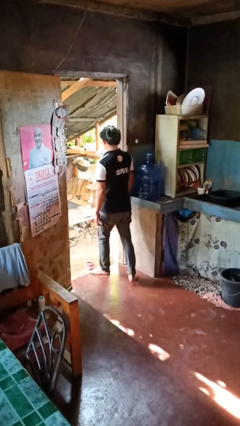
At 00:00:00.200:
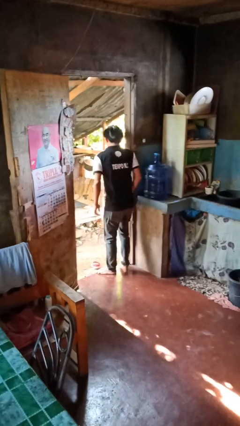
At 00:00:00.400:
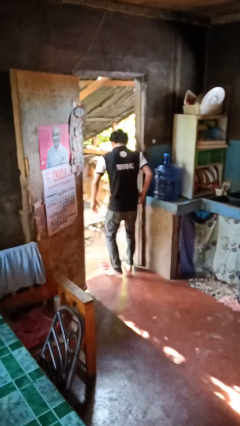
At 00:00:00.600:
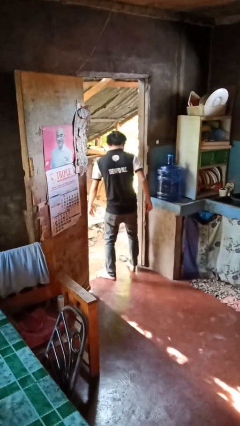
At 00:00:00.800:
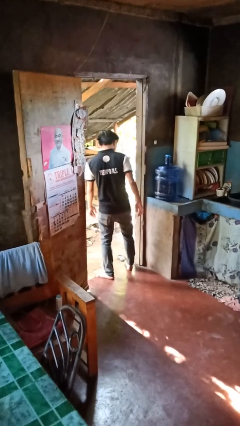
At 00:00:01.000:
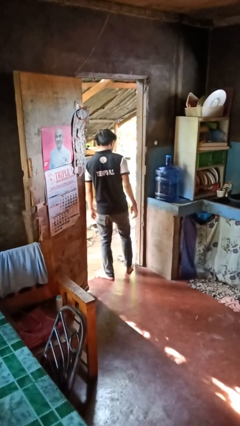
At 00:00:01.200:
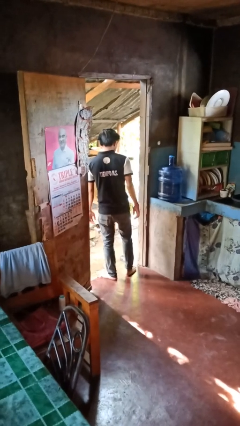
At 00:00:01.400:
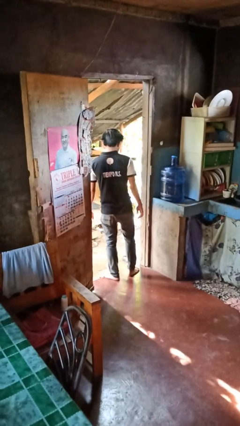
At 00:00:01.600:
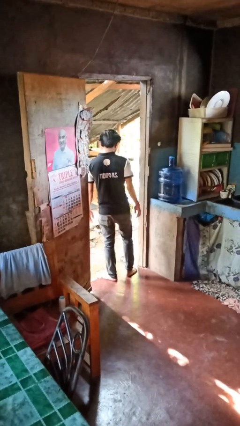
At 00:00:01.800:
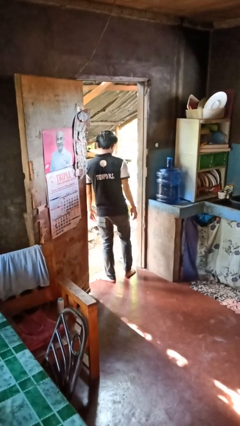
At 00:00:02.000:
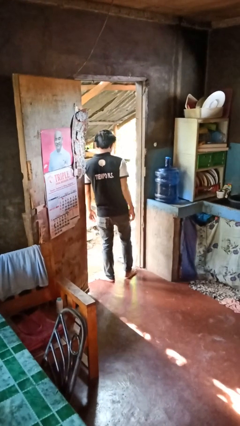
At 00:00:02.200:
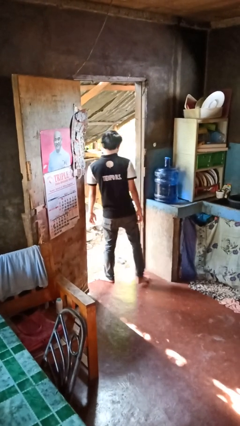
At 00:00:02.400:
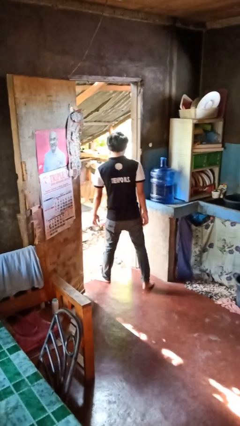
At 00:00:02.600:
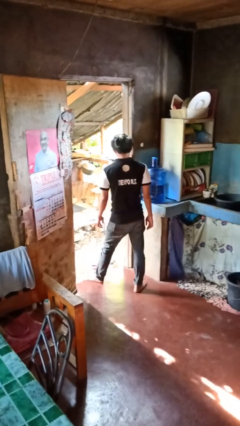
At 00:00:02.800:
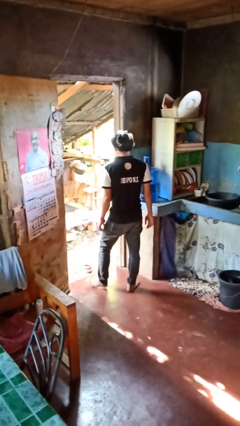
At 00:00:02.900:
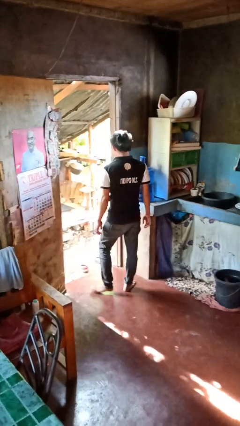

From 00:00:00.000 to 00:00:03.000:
person bumps into wall

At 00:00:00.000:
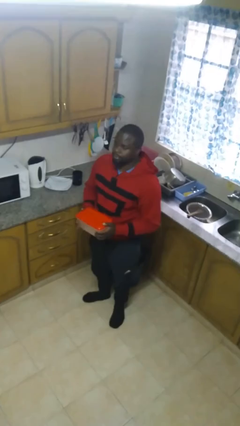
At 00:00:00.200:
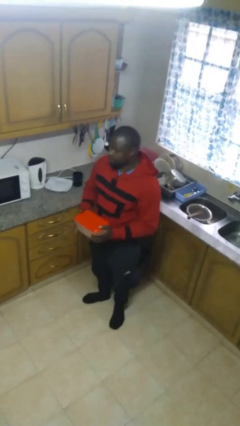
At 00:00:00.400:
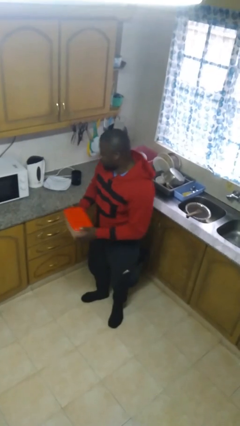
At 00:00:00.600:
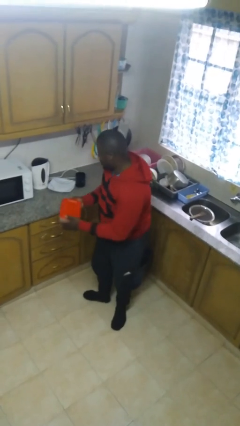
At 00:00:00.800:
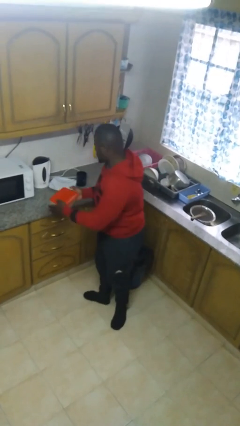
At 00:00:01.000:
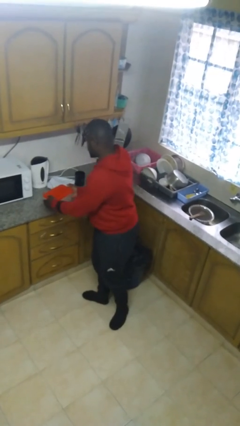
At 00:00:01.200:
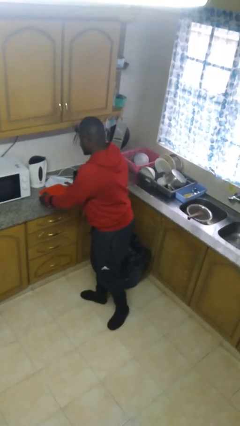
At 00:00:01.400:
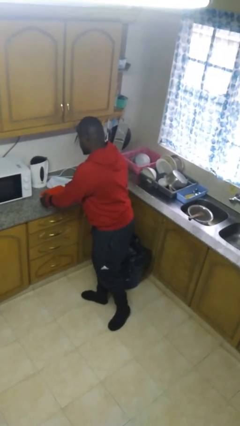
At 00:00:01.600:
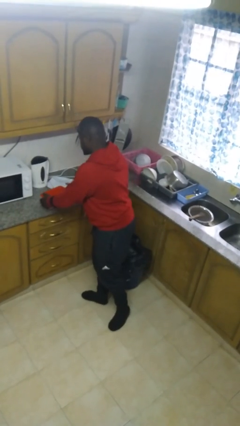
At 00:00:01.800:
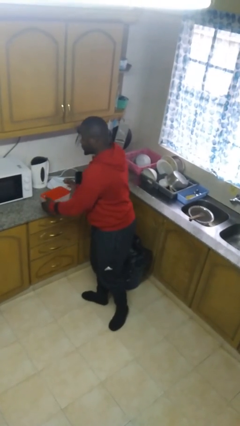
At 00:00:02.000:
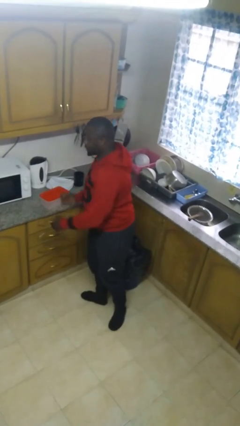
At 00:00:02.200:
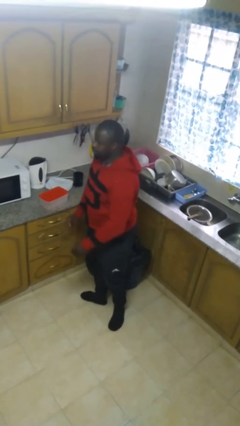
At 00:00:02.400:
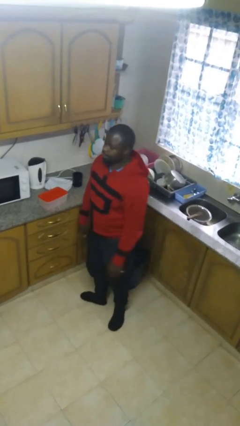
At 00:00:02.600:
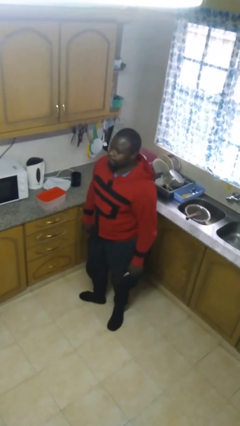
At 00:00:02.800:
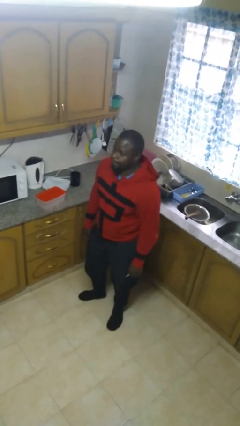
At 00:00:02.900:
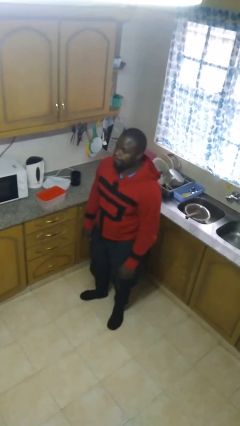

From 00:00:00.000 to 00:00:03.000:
person puts down object on countertop

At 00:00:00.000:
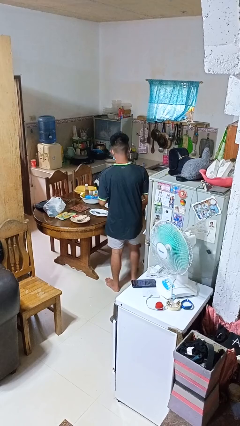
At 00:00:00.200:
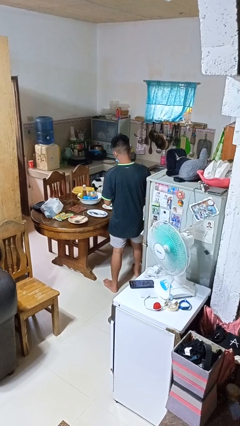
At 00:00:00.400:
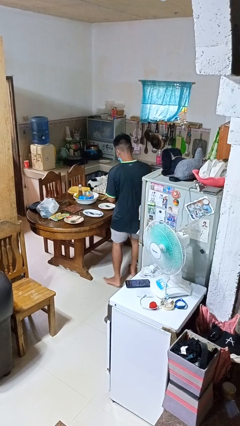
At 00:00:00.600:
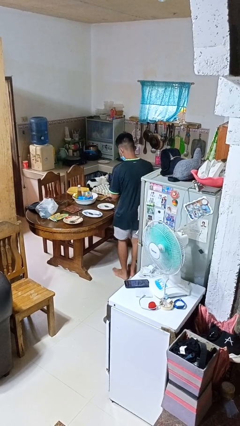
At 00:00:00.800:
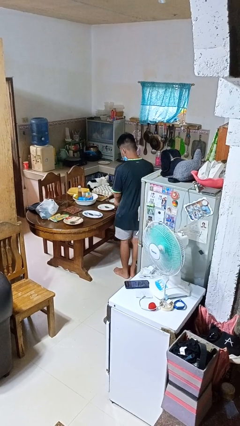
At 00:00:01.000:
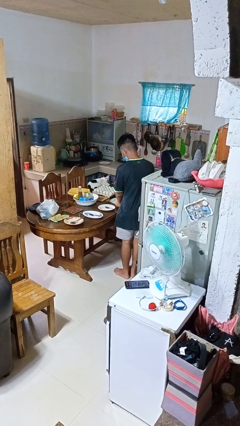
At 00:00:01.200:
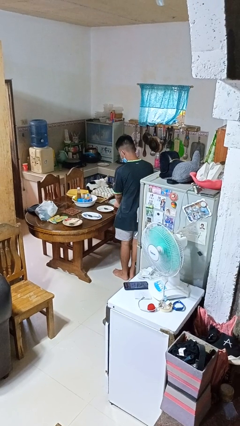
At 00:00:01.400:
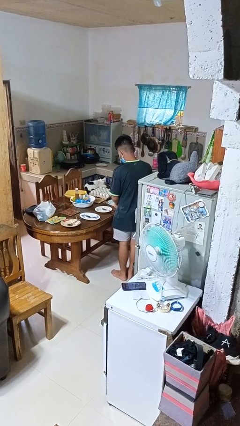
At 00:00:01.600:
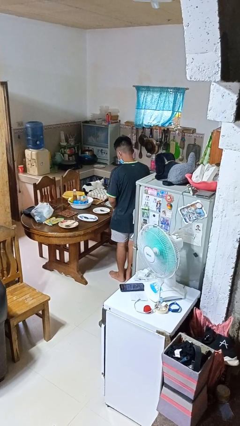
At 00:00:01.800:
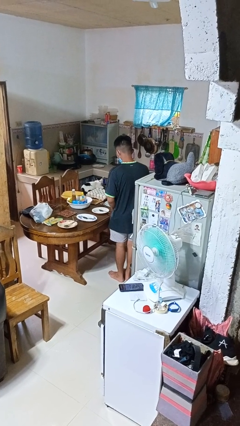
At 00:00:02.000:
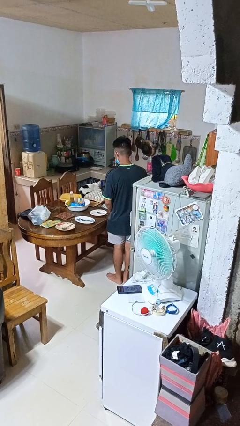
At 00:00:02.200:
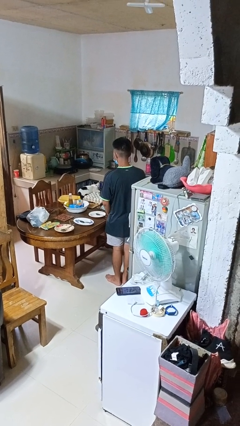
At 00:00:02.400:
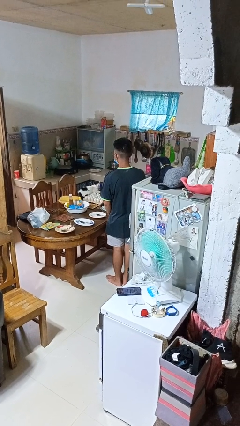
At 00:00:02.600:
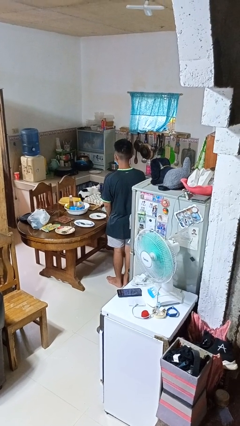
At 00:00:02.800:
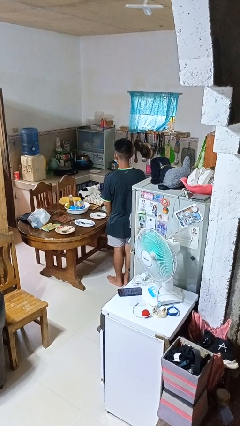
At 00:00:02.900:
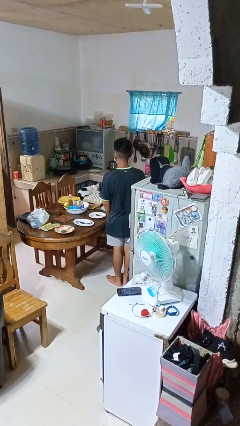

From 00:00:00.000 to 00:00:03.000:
person sets table

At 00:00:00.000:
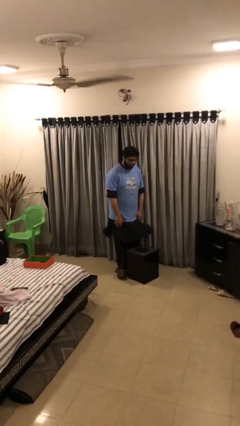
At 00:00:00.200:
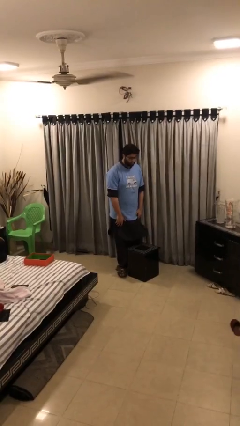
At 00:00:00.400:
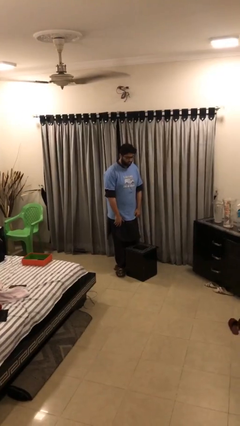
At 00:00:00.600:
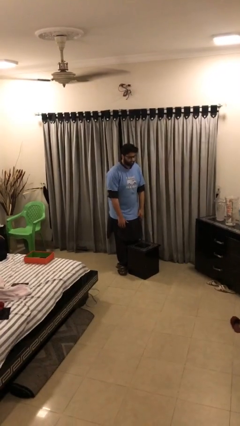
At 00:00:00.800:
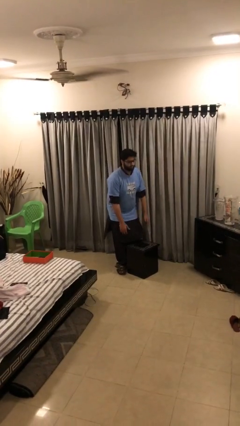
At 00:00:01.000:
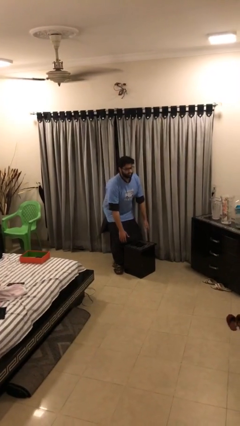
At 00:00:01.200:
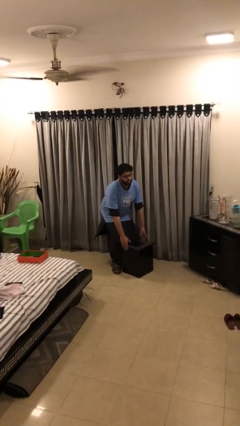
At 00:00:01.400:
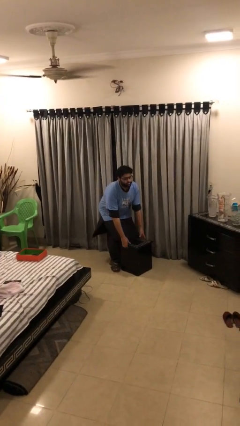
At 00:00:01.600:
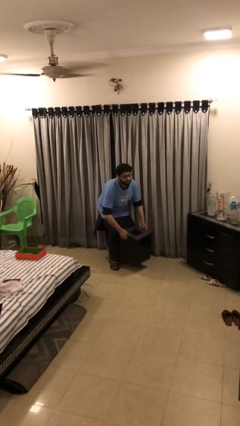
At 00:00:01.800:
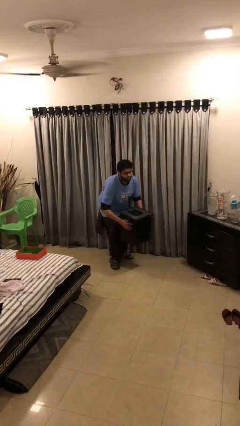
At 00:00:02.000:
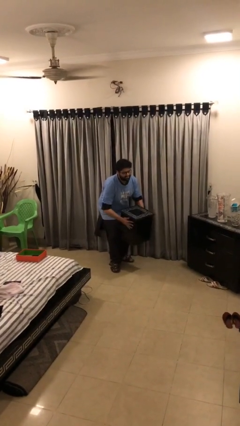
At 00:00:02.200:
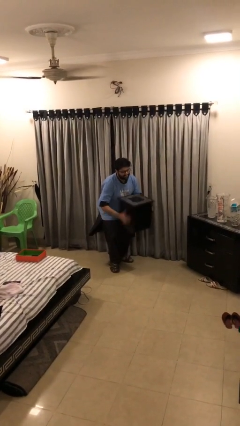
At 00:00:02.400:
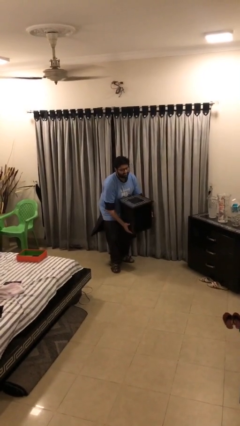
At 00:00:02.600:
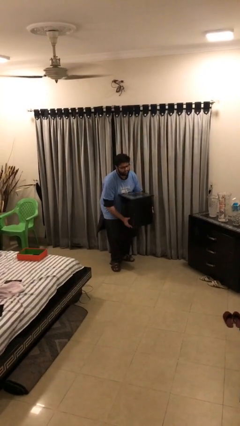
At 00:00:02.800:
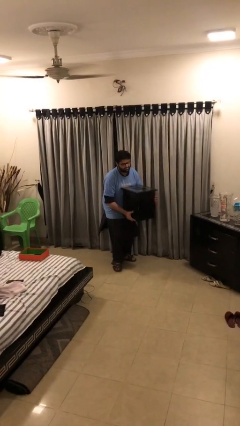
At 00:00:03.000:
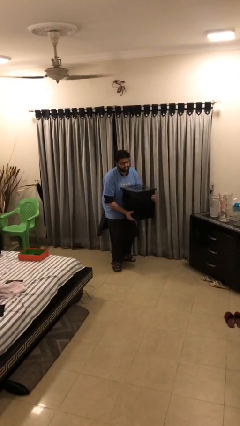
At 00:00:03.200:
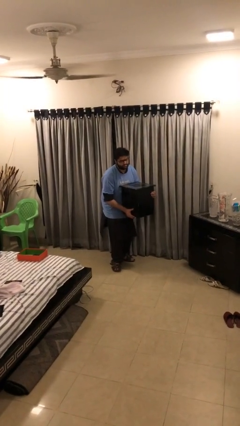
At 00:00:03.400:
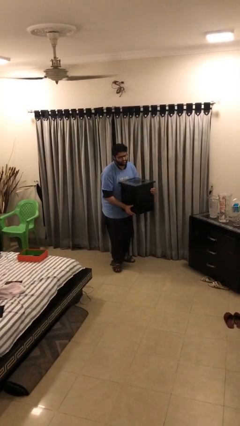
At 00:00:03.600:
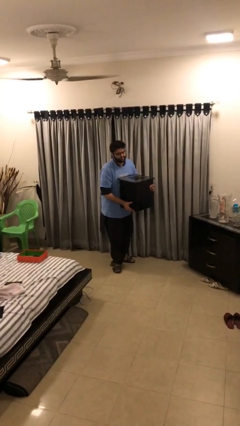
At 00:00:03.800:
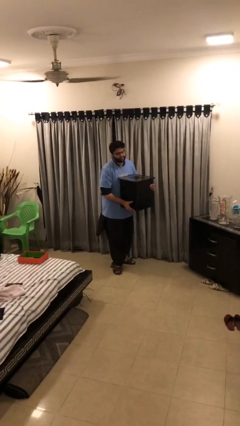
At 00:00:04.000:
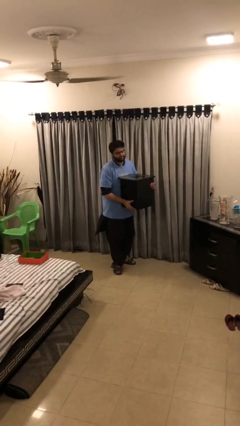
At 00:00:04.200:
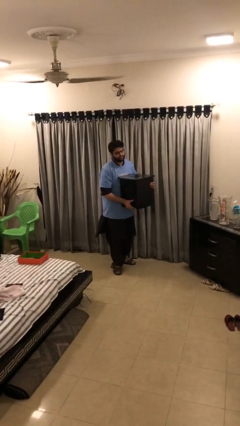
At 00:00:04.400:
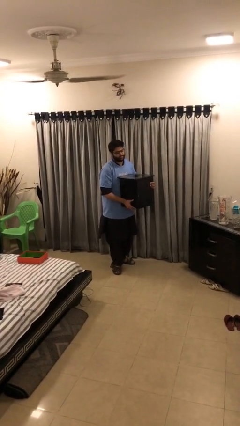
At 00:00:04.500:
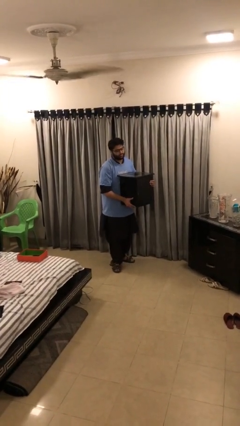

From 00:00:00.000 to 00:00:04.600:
person picks up object from floor

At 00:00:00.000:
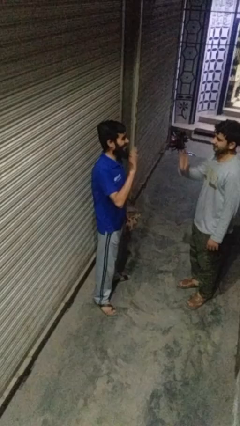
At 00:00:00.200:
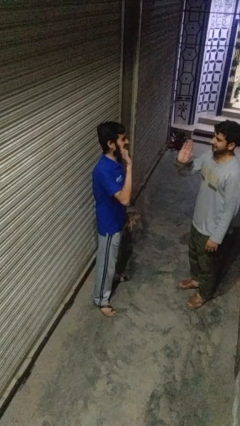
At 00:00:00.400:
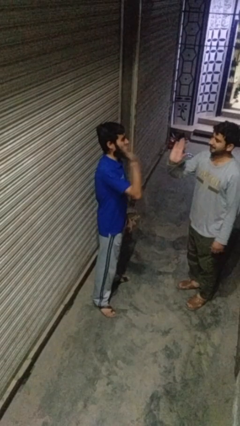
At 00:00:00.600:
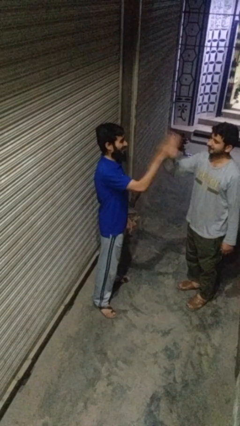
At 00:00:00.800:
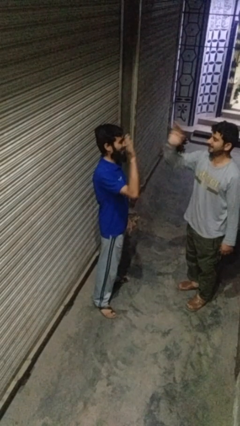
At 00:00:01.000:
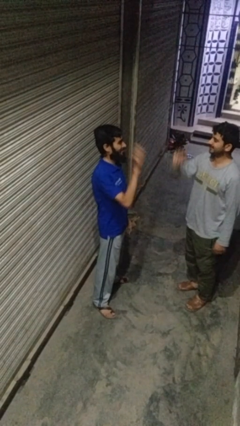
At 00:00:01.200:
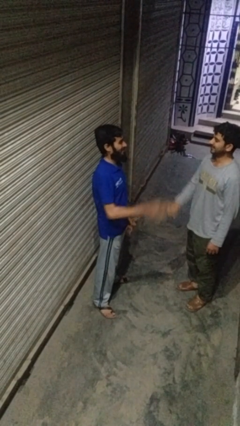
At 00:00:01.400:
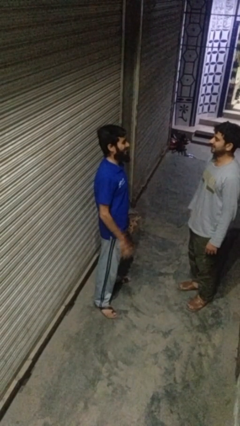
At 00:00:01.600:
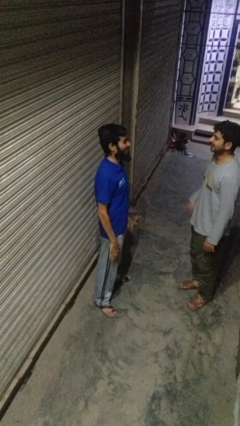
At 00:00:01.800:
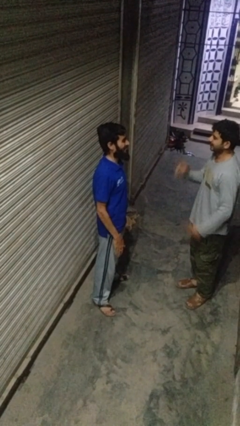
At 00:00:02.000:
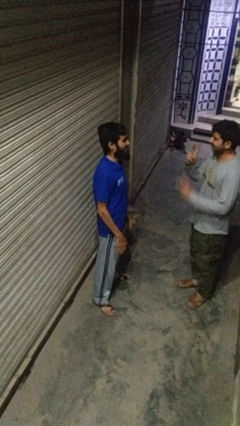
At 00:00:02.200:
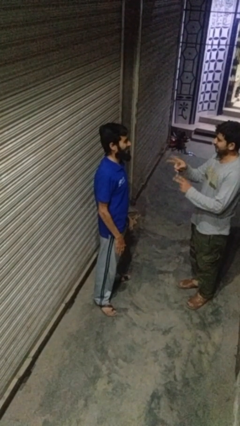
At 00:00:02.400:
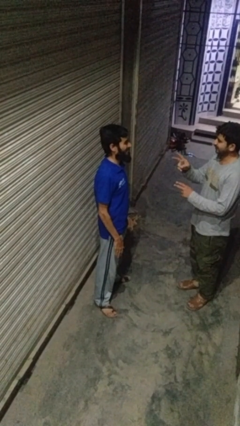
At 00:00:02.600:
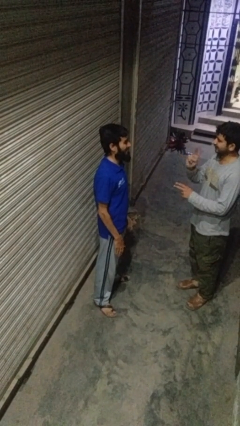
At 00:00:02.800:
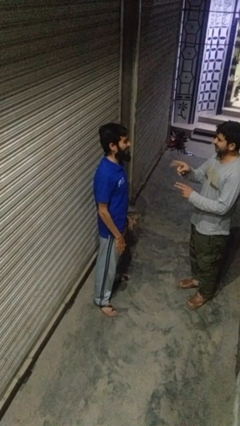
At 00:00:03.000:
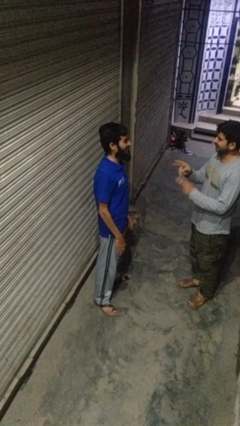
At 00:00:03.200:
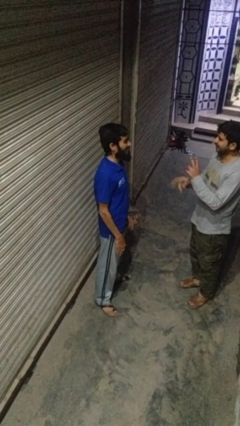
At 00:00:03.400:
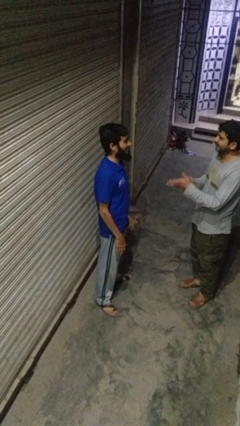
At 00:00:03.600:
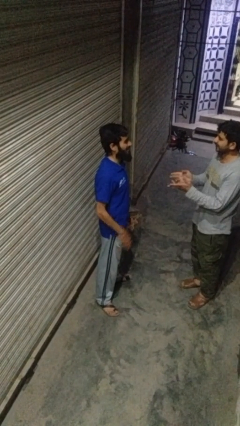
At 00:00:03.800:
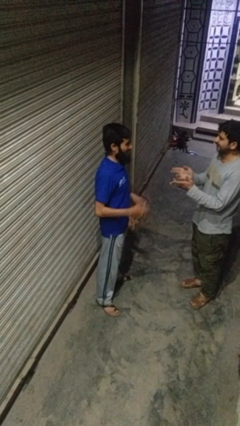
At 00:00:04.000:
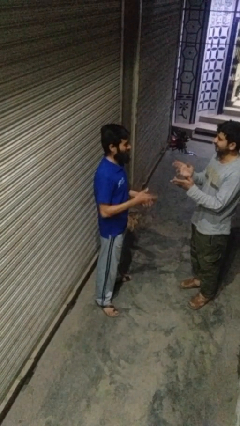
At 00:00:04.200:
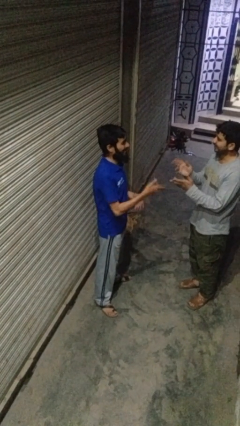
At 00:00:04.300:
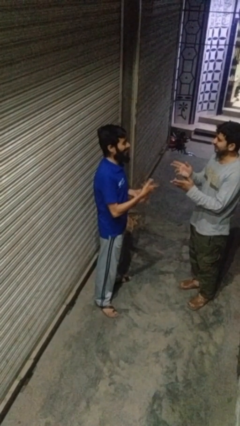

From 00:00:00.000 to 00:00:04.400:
person highfives hand
